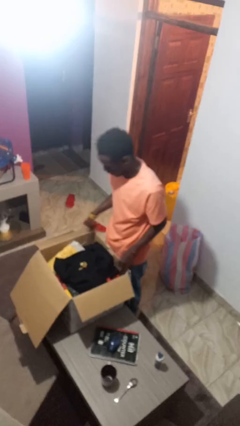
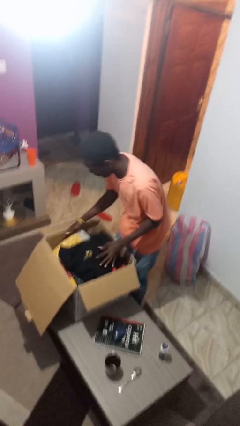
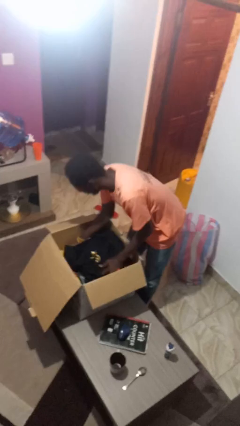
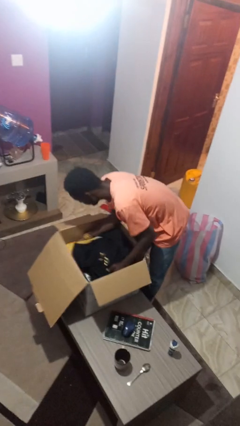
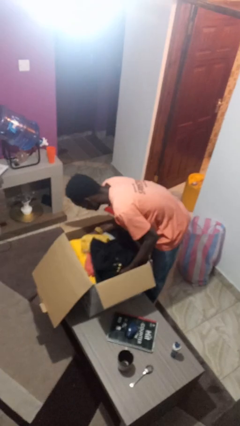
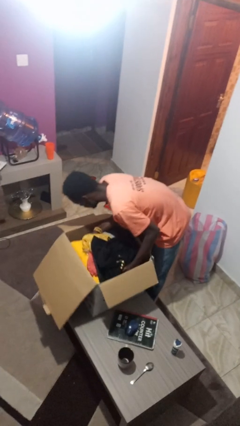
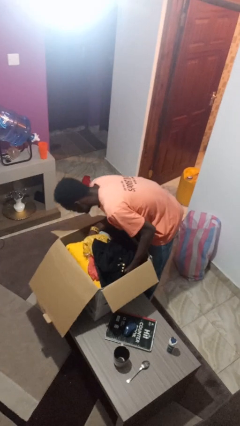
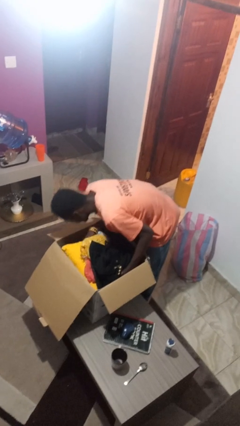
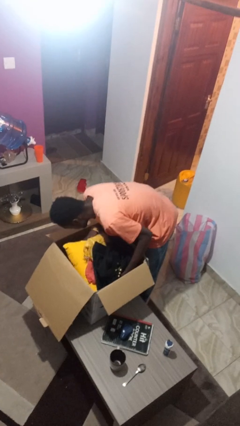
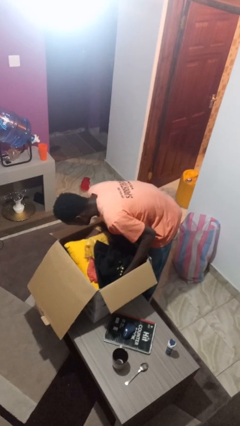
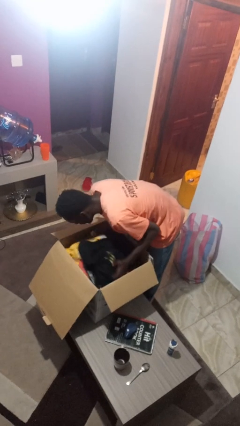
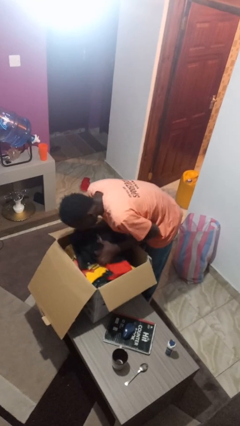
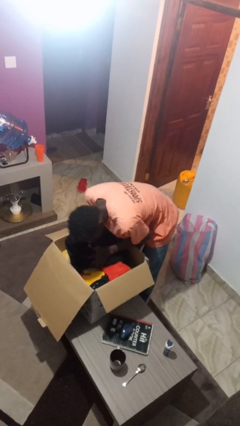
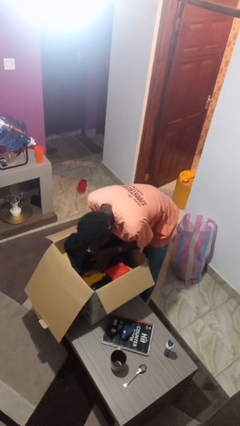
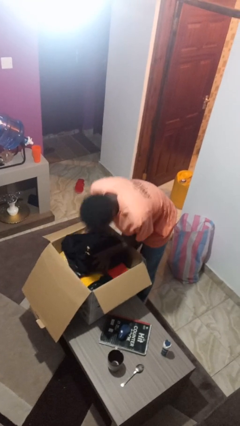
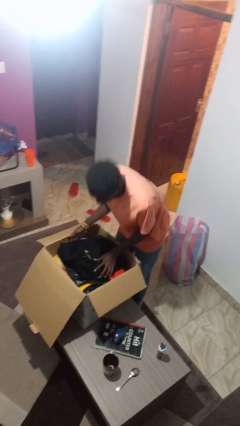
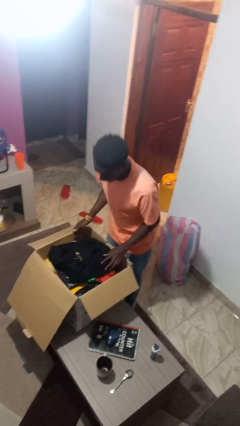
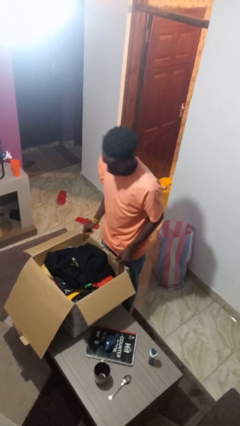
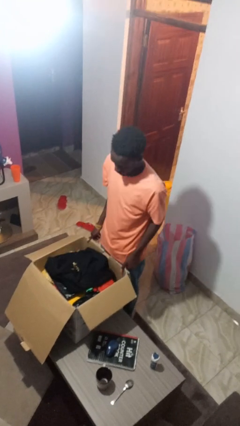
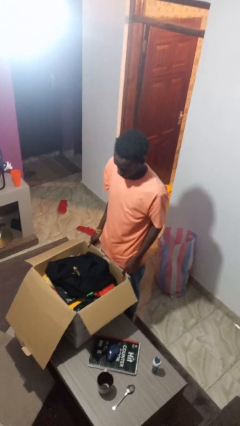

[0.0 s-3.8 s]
person searches in box

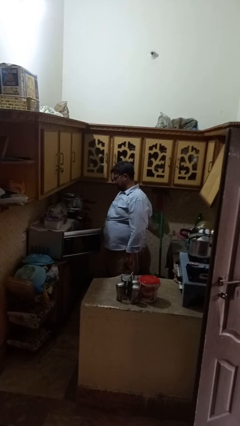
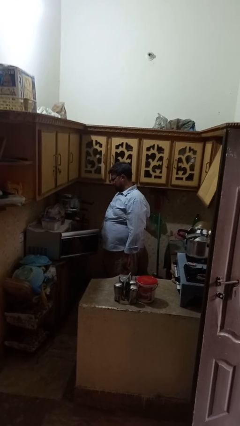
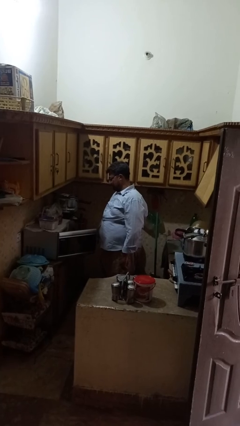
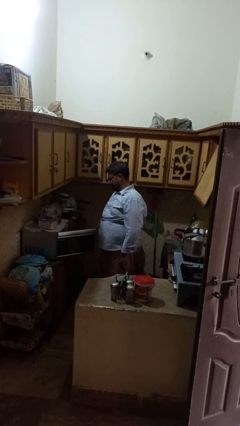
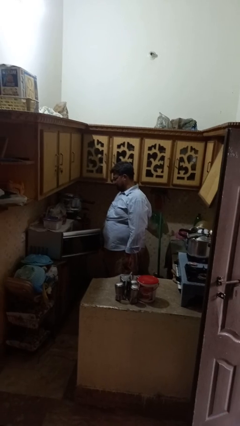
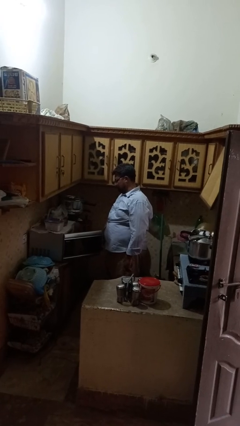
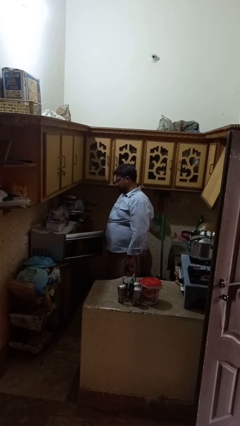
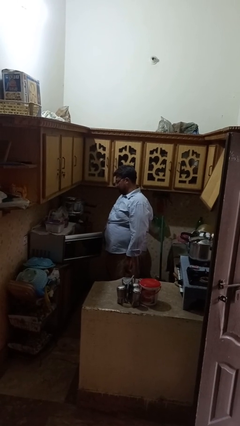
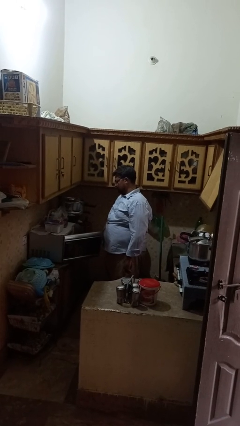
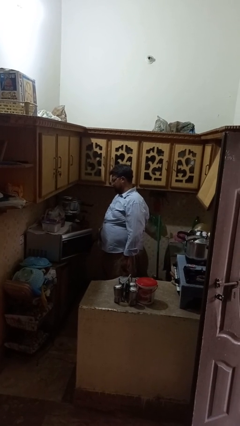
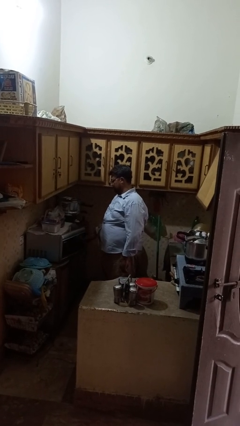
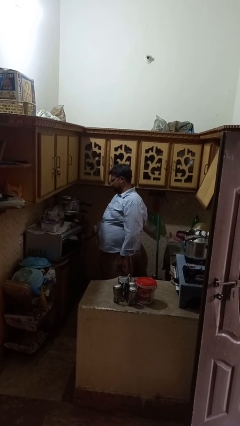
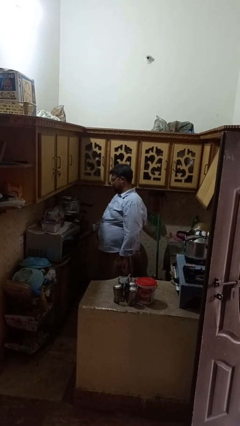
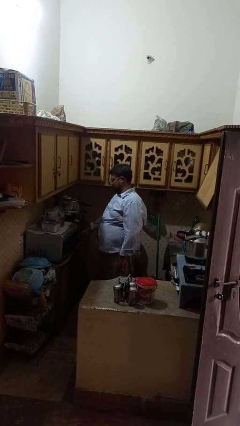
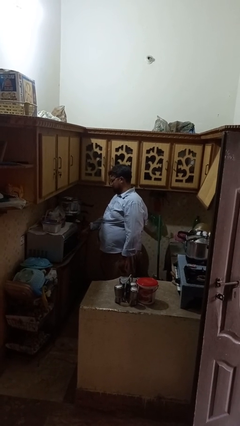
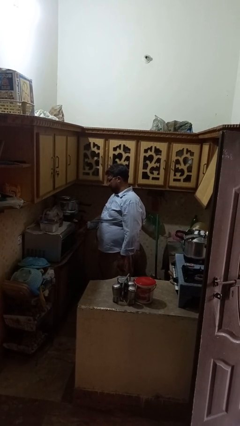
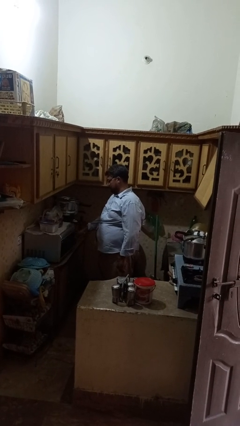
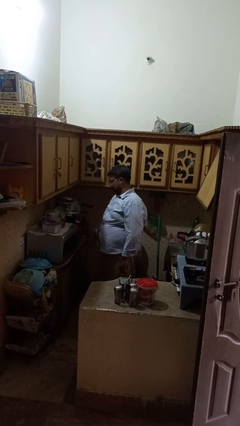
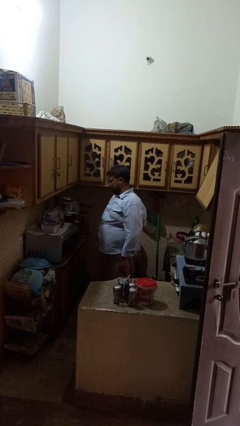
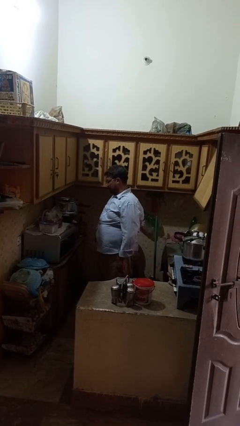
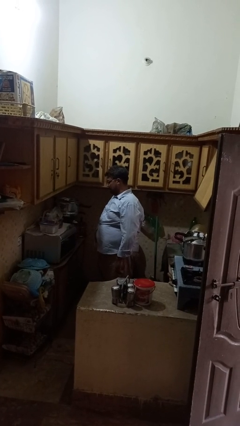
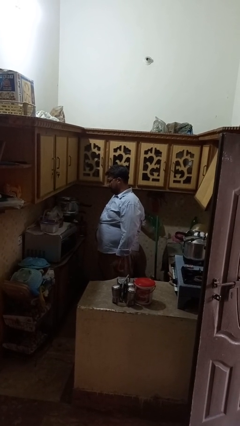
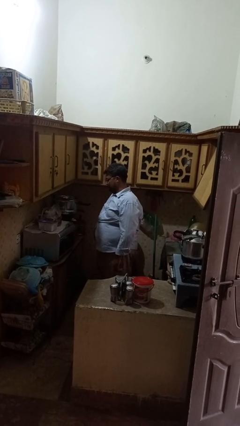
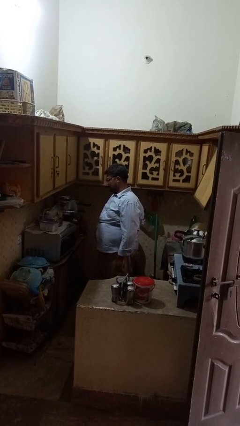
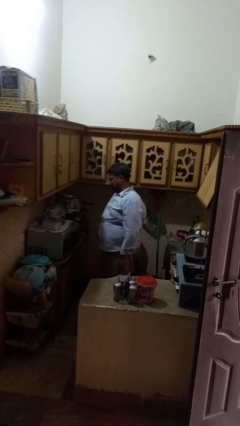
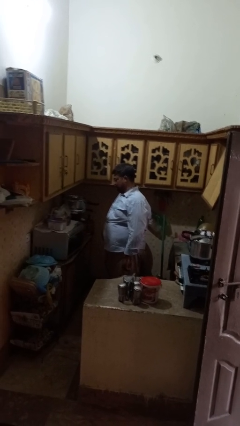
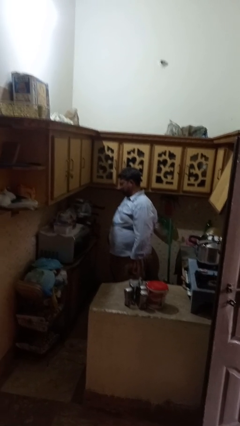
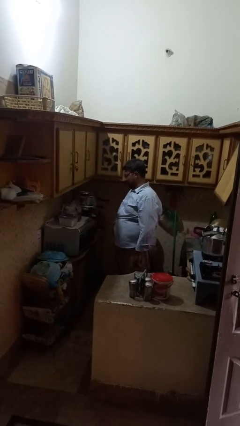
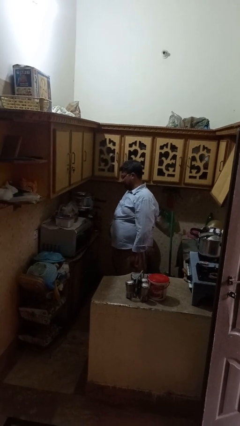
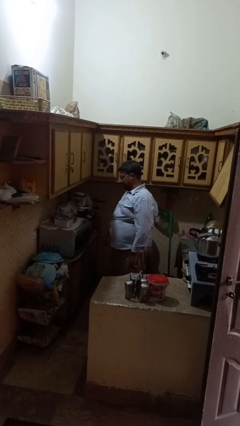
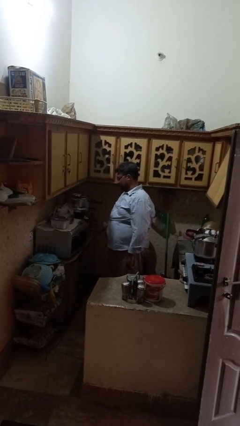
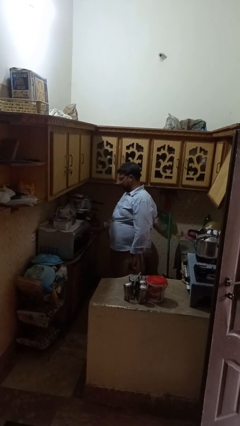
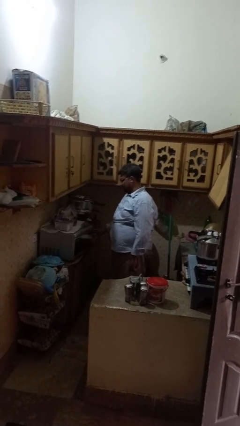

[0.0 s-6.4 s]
person closes microwave

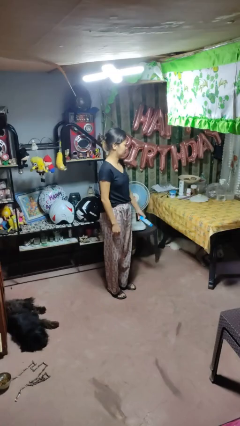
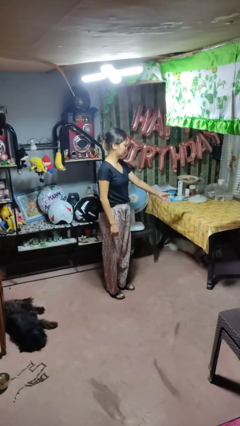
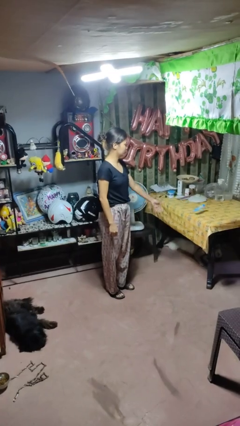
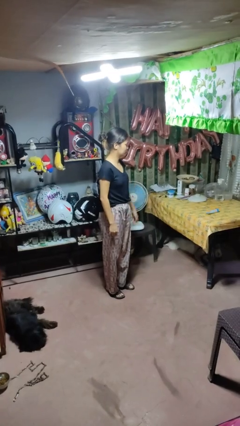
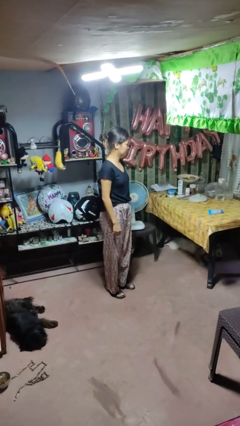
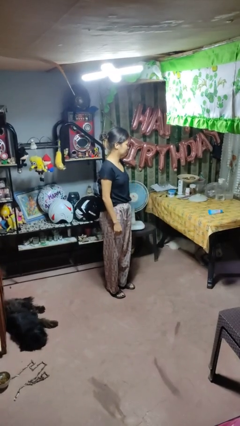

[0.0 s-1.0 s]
person throws object on table

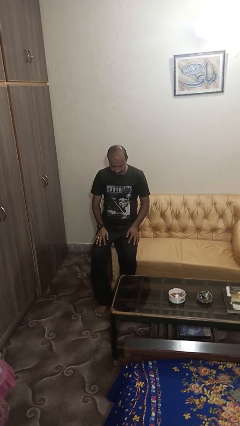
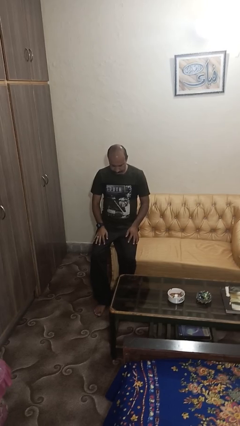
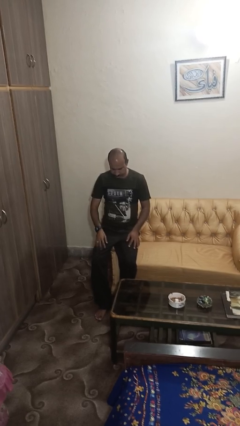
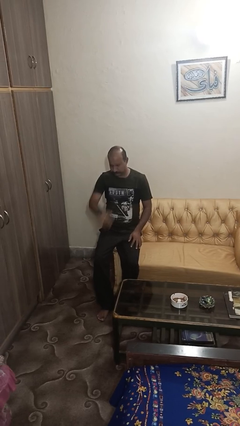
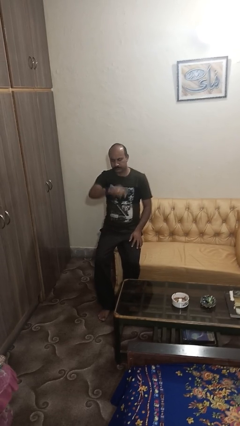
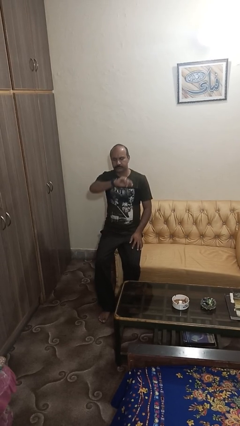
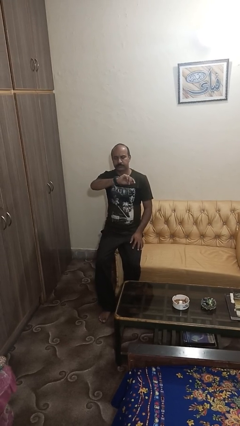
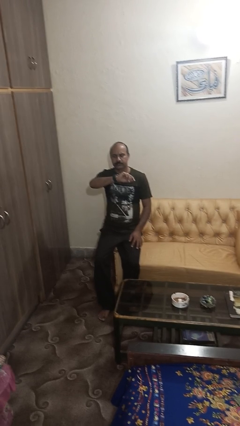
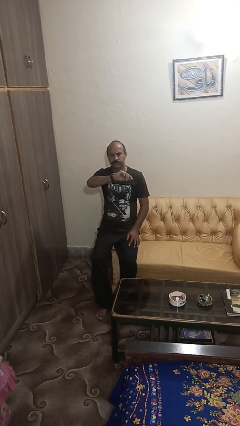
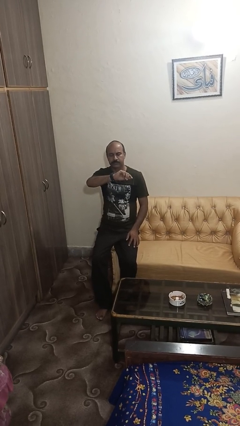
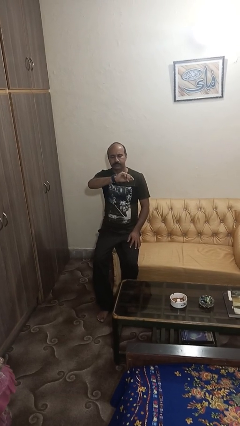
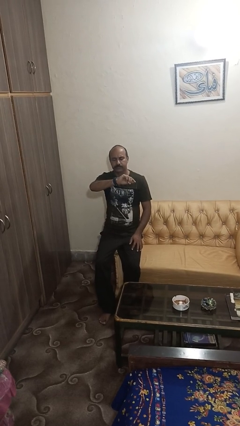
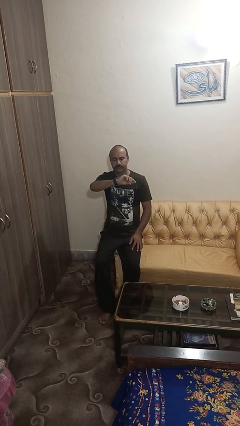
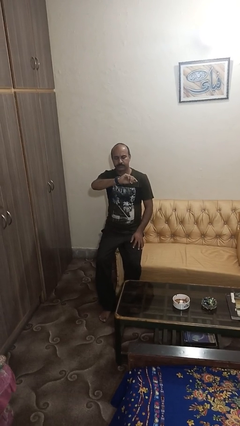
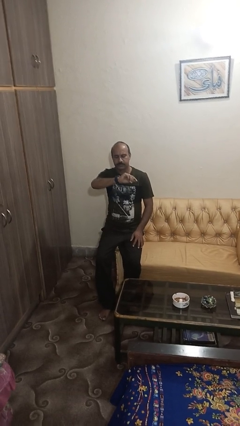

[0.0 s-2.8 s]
person looks at wristwatch

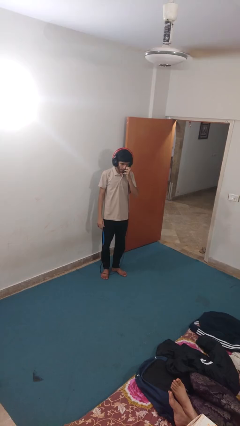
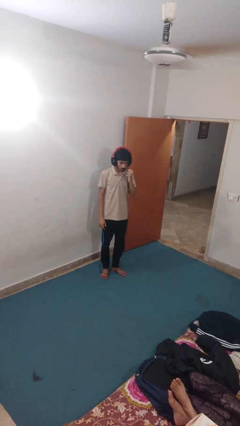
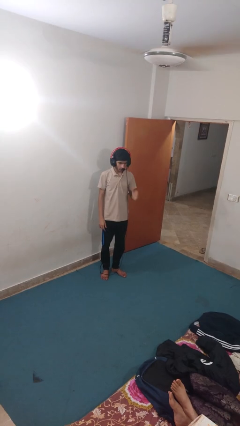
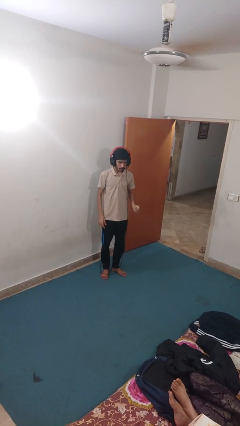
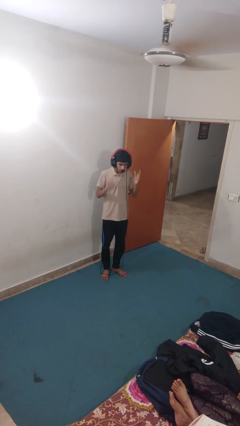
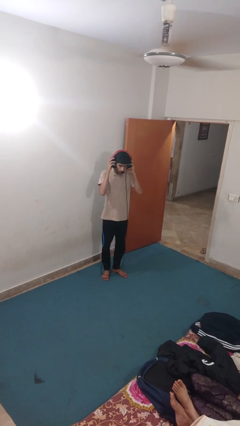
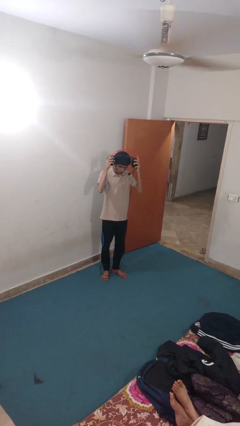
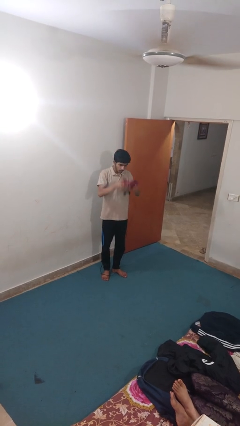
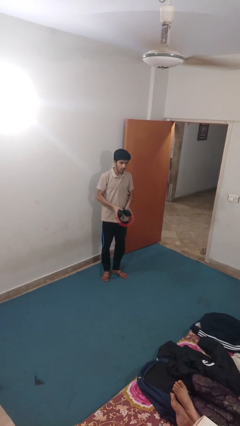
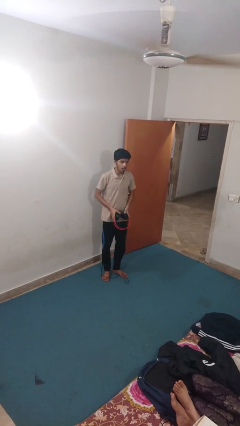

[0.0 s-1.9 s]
person takes off headphones

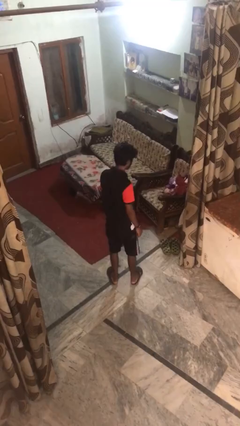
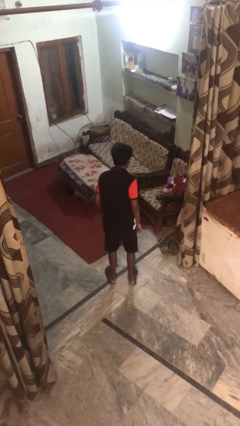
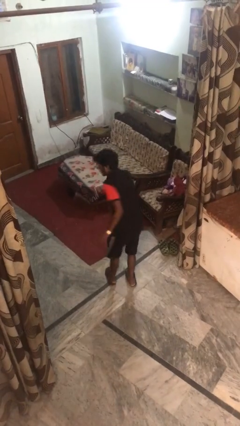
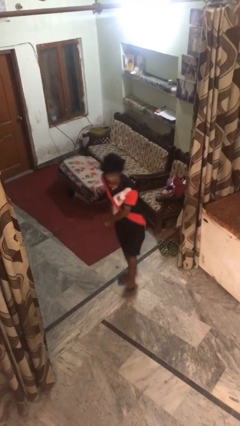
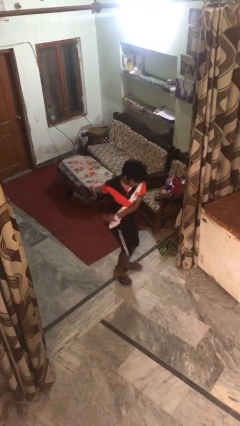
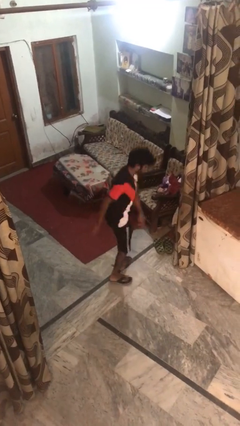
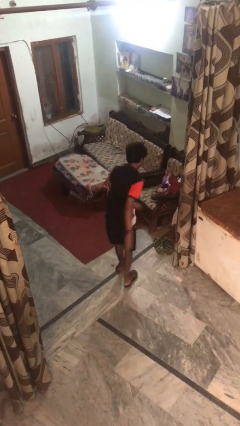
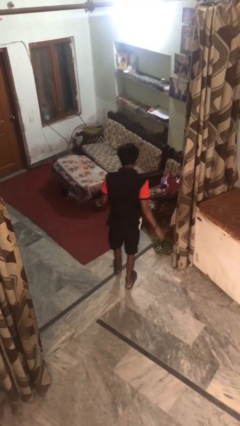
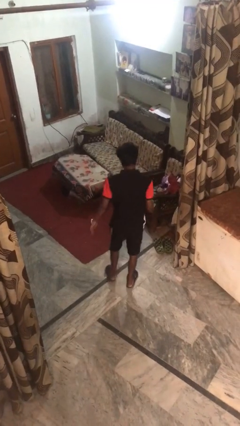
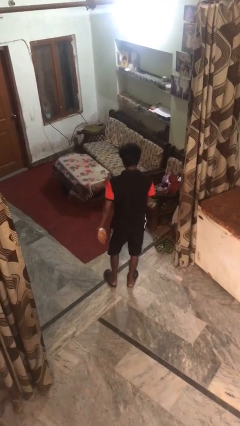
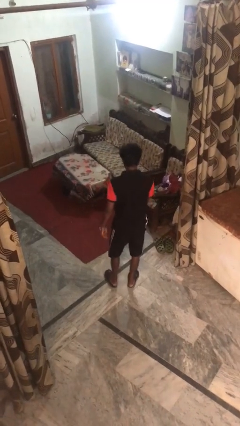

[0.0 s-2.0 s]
person twirls
